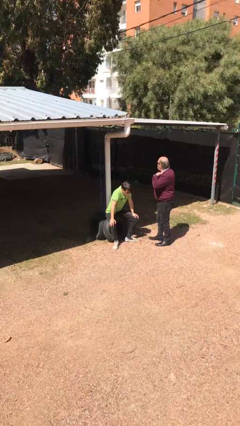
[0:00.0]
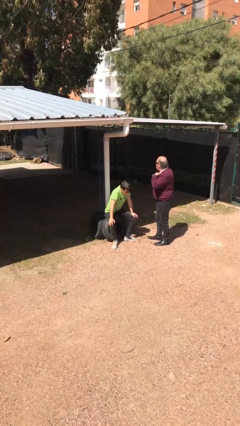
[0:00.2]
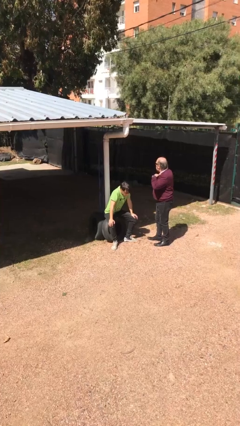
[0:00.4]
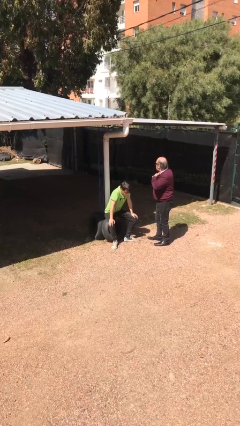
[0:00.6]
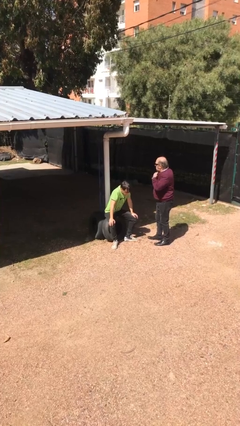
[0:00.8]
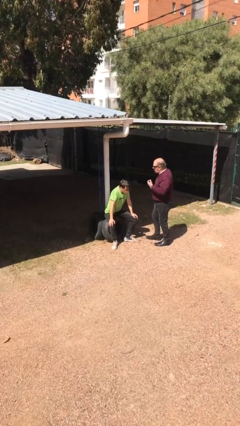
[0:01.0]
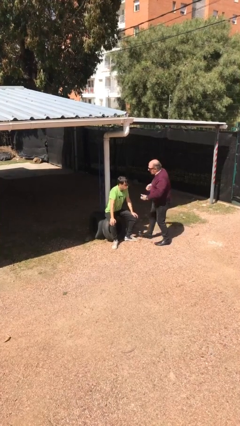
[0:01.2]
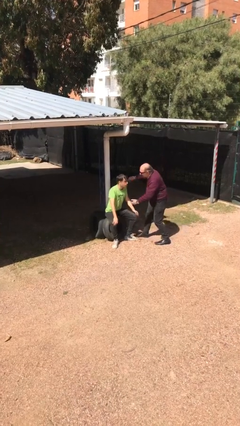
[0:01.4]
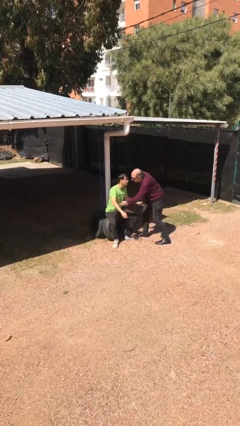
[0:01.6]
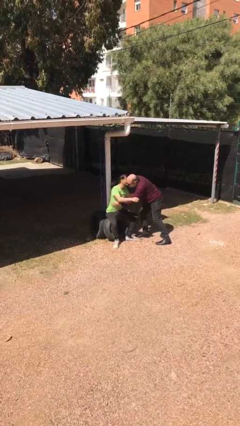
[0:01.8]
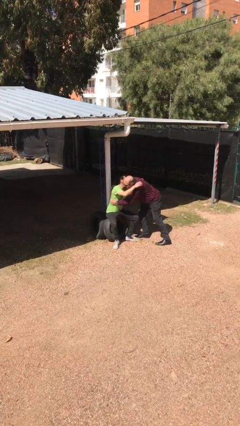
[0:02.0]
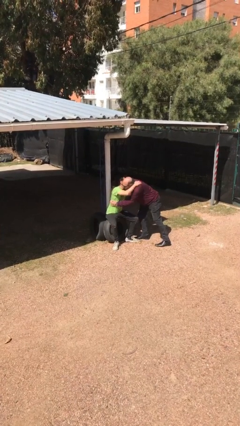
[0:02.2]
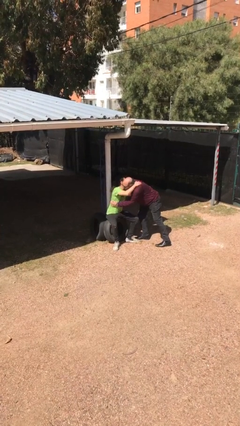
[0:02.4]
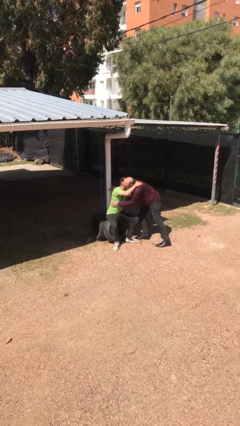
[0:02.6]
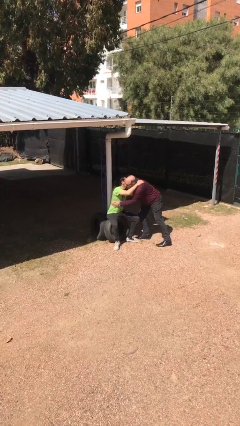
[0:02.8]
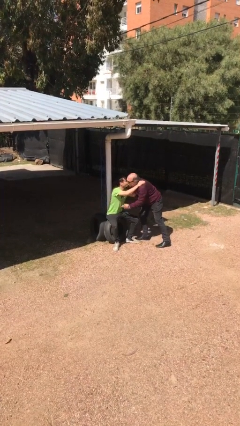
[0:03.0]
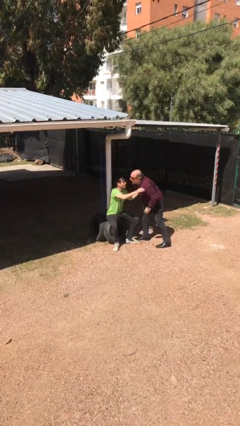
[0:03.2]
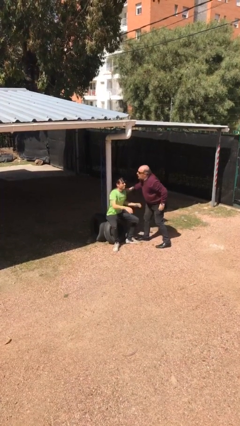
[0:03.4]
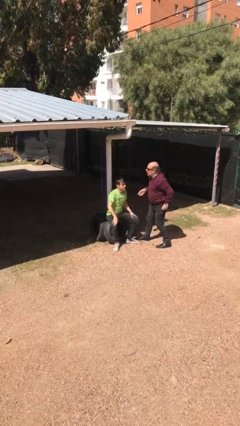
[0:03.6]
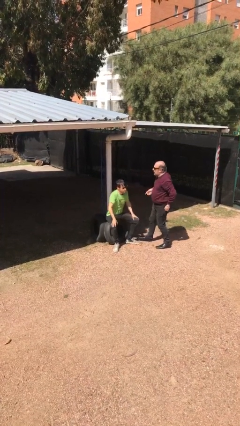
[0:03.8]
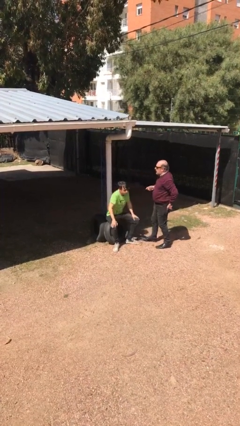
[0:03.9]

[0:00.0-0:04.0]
person embraces person

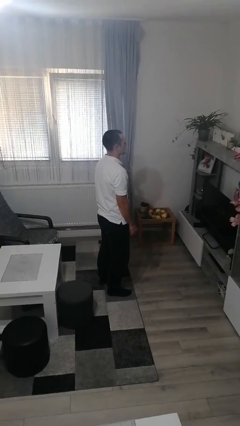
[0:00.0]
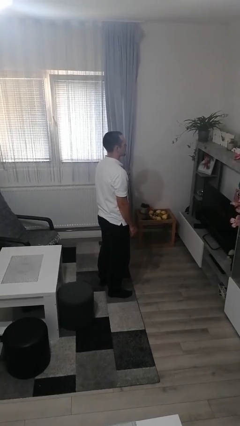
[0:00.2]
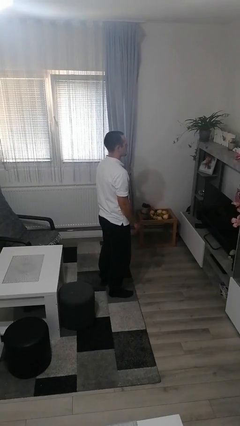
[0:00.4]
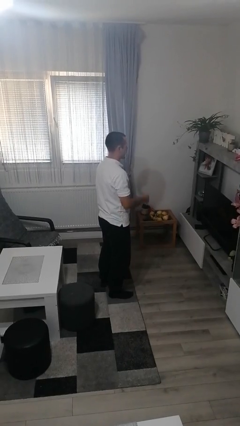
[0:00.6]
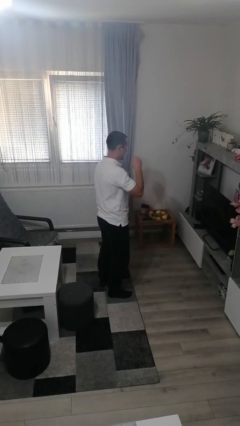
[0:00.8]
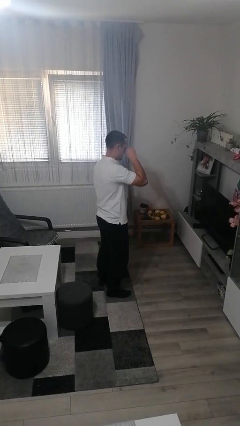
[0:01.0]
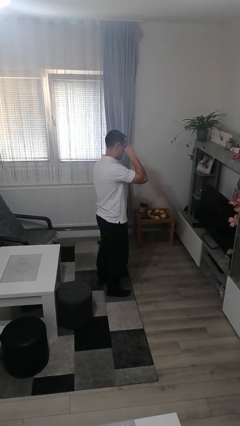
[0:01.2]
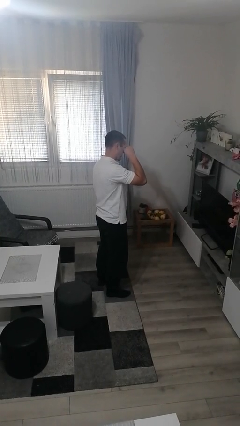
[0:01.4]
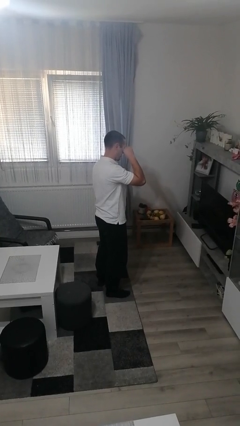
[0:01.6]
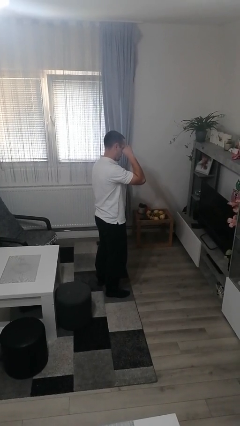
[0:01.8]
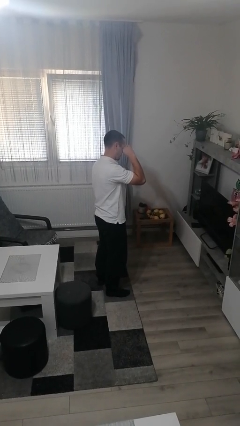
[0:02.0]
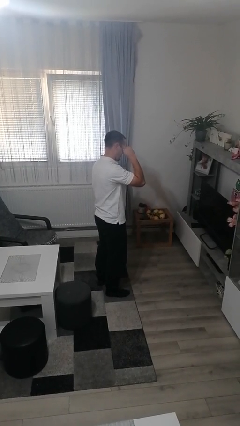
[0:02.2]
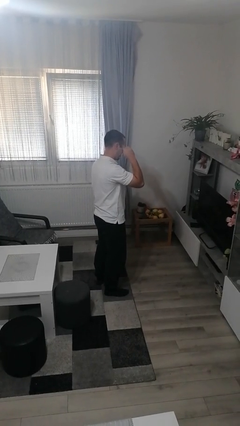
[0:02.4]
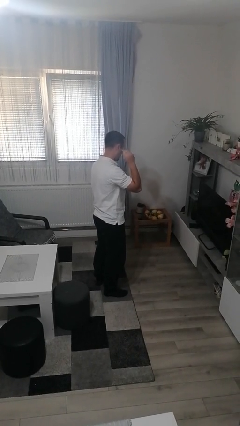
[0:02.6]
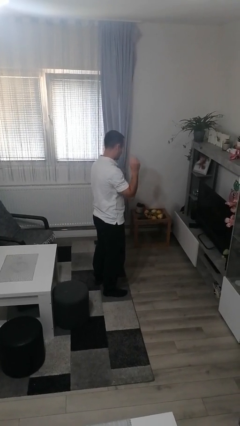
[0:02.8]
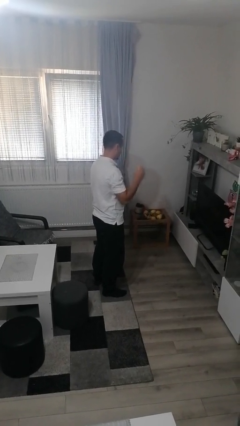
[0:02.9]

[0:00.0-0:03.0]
person rubs eyes

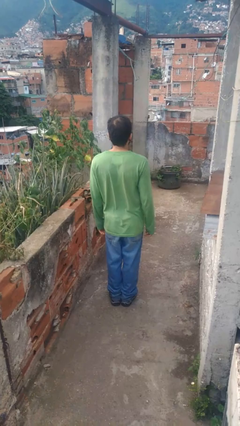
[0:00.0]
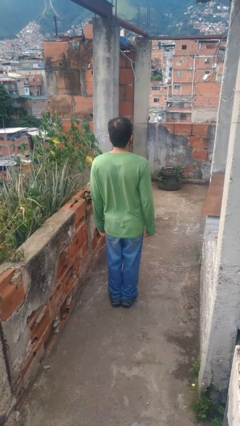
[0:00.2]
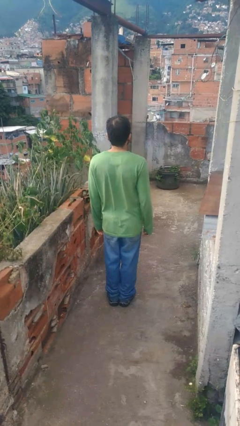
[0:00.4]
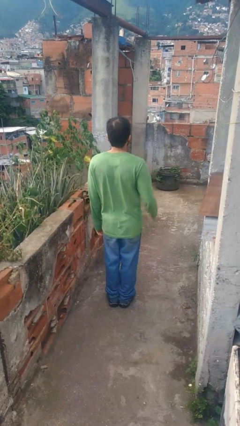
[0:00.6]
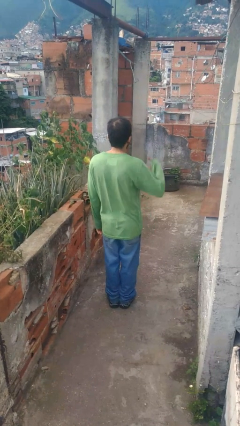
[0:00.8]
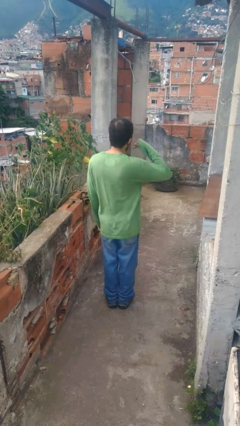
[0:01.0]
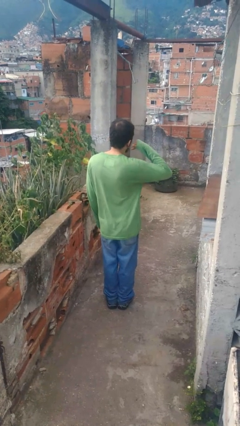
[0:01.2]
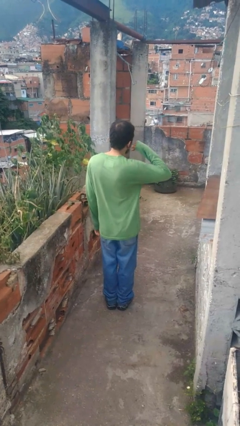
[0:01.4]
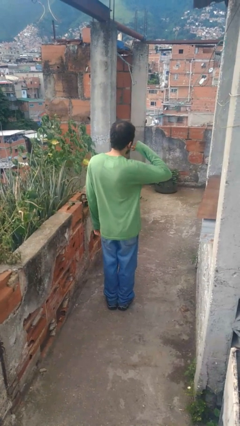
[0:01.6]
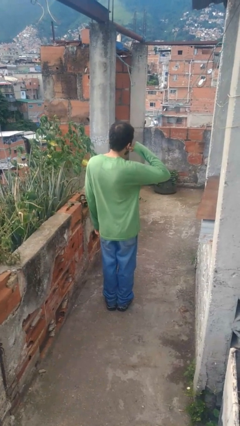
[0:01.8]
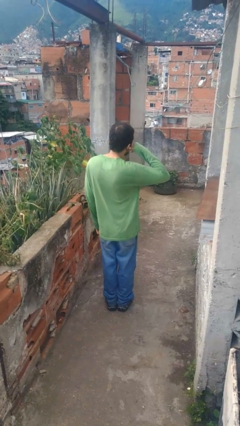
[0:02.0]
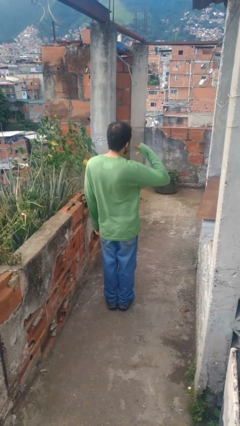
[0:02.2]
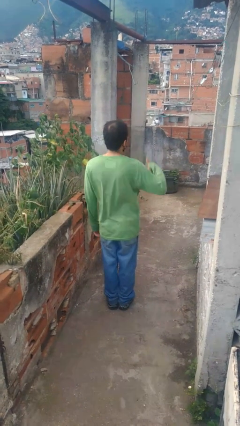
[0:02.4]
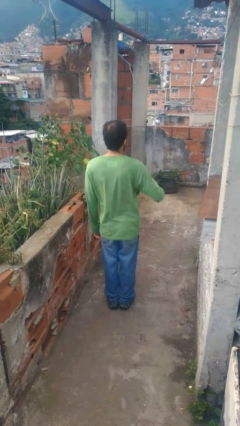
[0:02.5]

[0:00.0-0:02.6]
person gestures call me

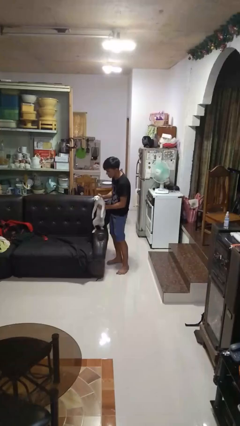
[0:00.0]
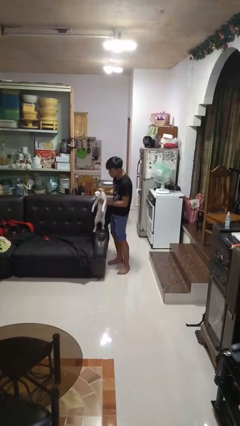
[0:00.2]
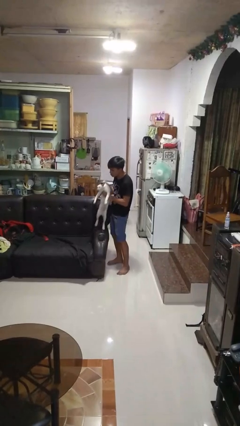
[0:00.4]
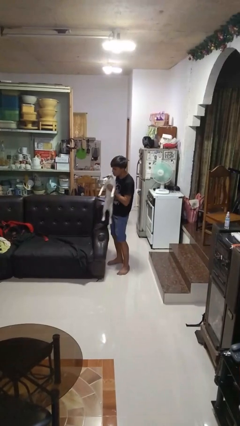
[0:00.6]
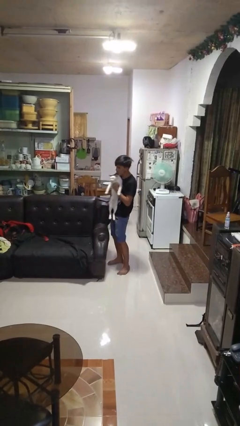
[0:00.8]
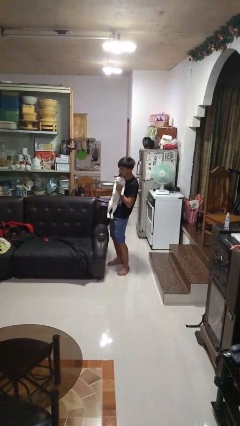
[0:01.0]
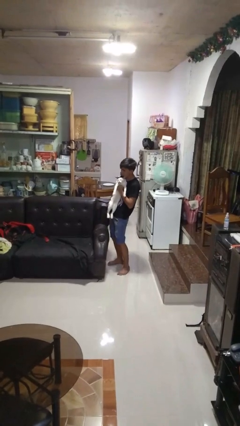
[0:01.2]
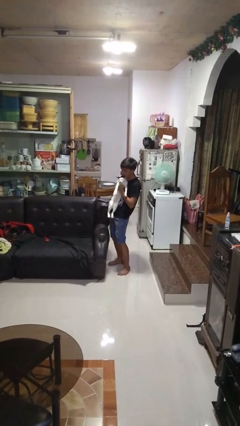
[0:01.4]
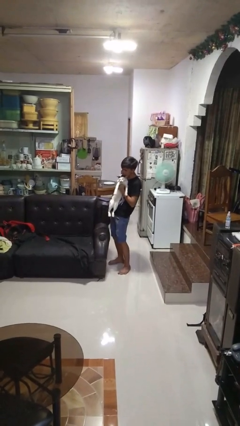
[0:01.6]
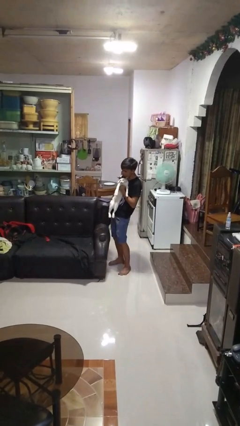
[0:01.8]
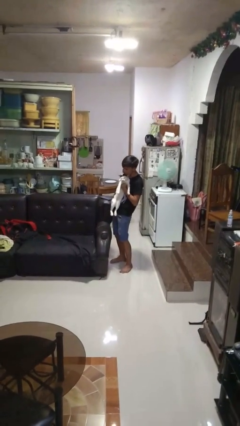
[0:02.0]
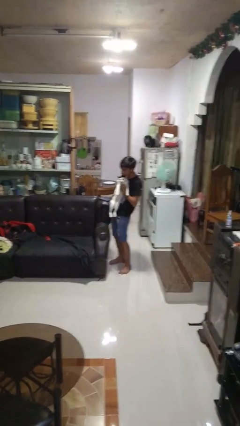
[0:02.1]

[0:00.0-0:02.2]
person hugs cat

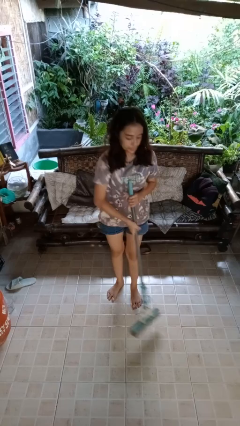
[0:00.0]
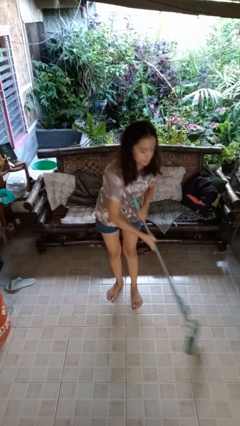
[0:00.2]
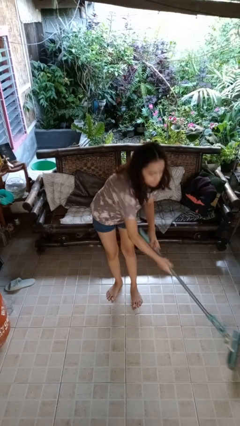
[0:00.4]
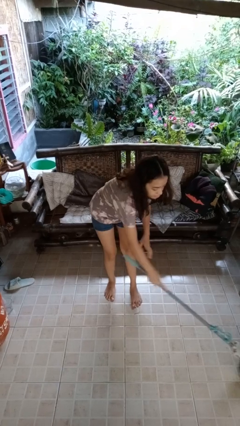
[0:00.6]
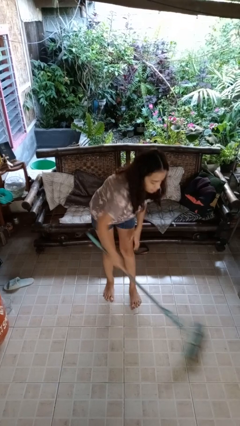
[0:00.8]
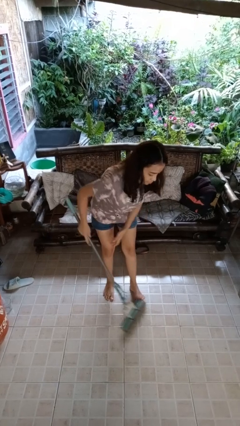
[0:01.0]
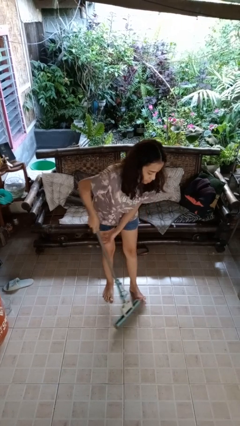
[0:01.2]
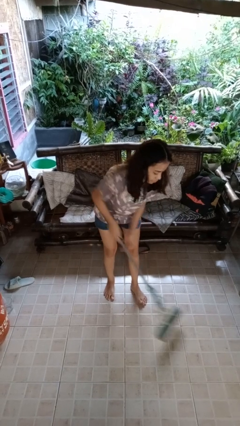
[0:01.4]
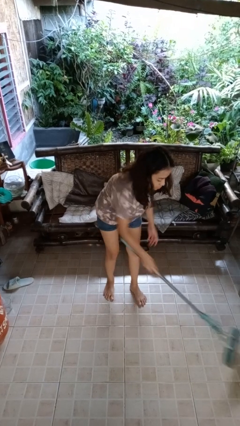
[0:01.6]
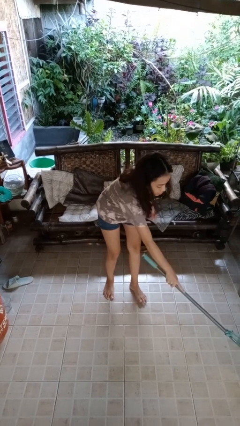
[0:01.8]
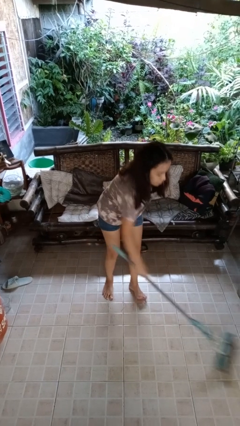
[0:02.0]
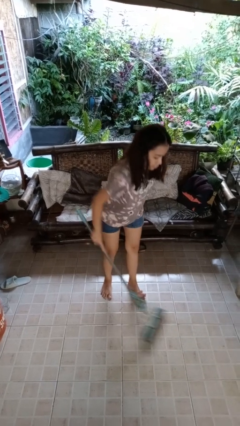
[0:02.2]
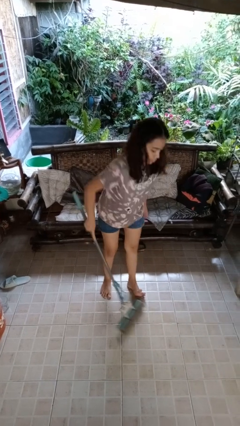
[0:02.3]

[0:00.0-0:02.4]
person mops

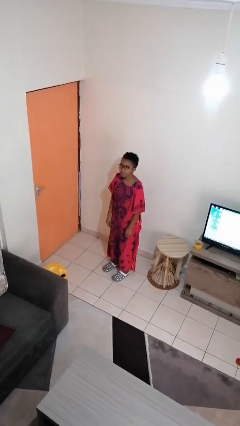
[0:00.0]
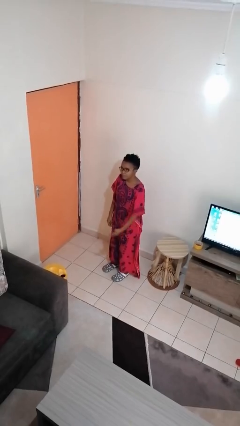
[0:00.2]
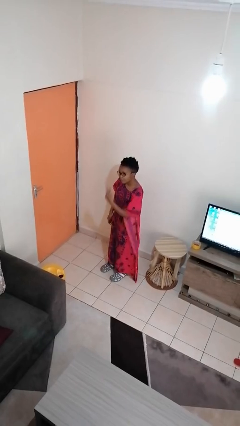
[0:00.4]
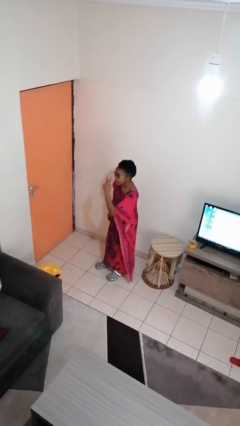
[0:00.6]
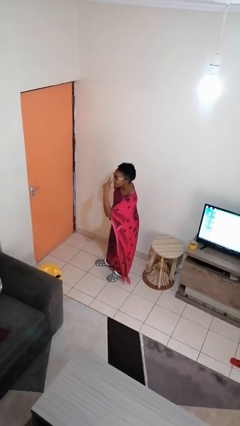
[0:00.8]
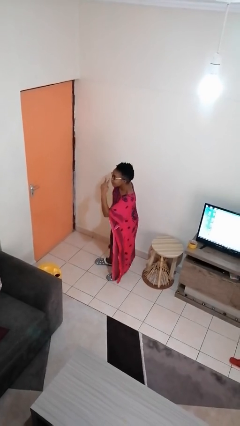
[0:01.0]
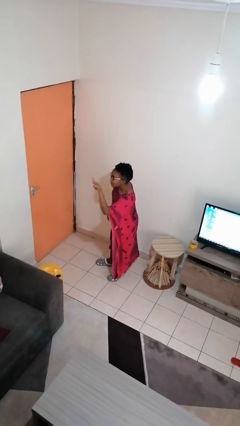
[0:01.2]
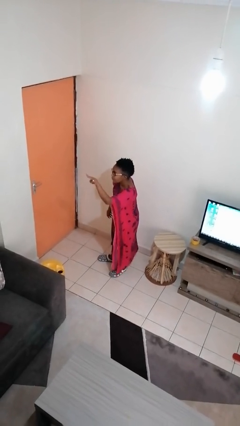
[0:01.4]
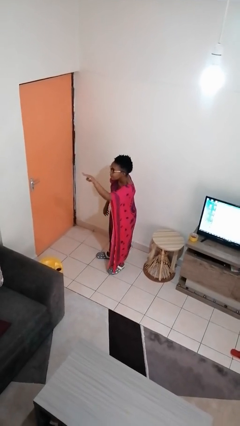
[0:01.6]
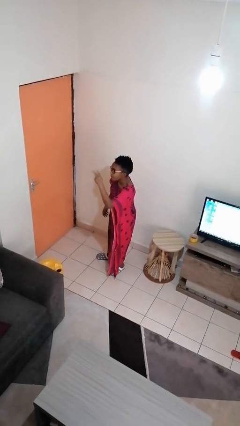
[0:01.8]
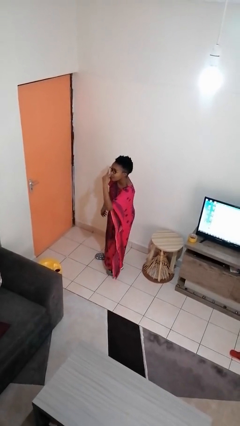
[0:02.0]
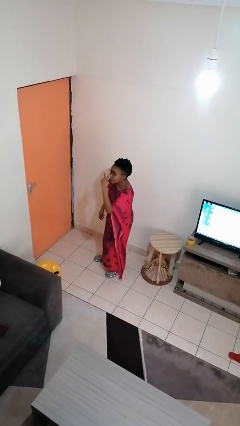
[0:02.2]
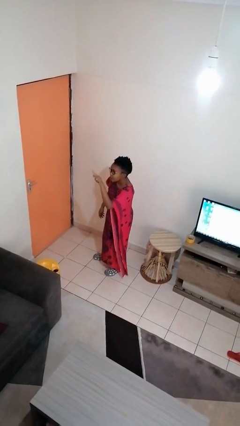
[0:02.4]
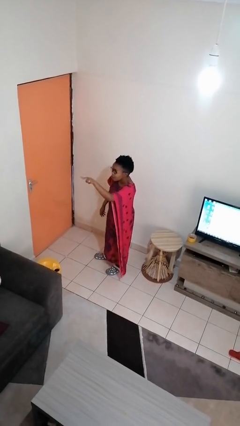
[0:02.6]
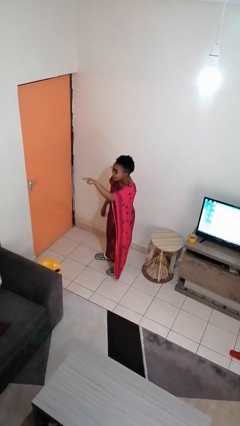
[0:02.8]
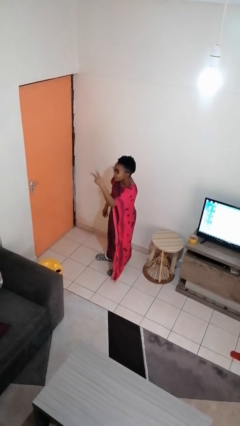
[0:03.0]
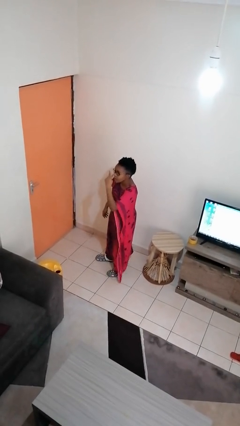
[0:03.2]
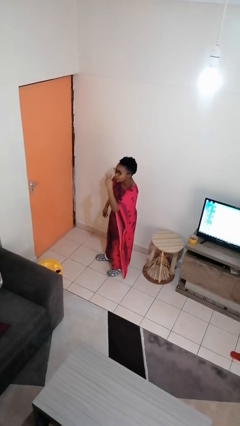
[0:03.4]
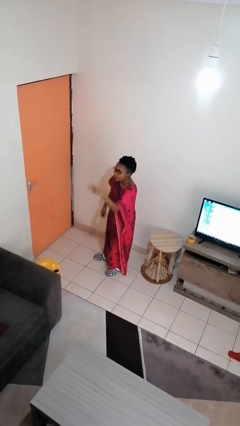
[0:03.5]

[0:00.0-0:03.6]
person gestures watch closely
